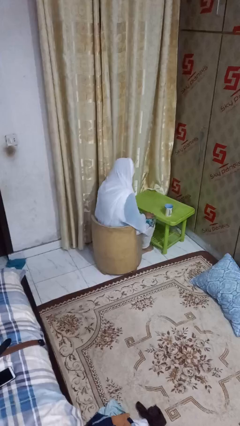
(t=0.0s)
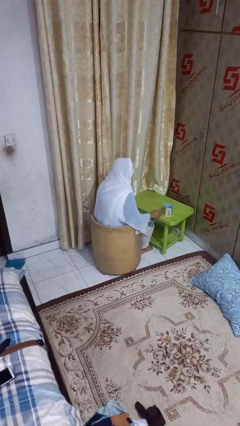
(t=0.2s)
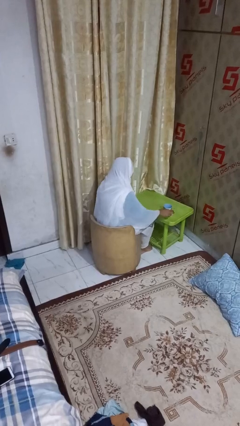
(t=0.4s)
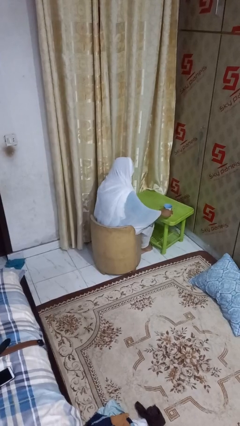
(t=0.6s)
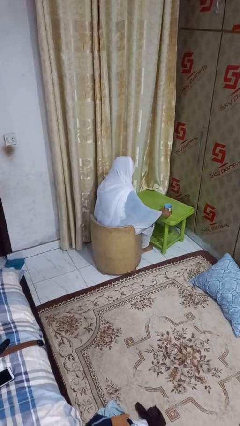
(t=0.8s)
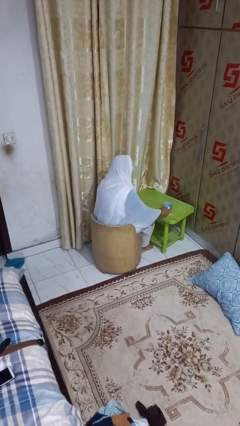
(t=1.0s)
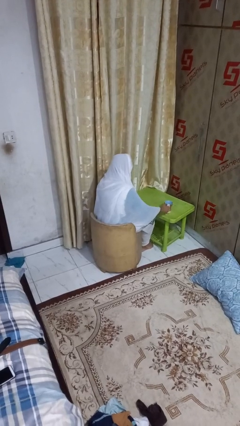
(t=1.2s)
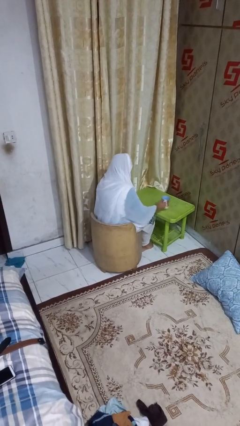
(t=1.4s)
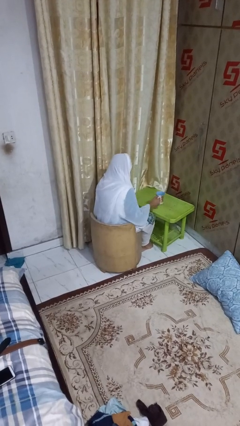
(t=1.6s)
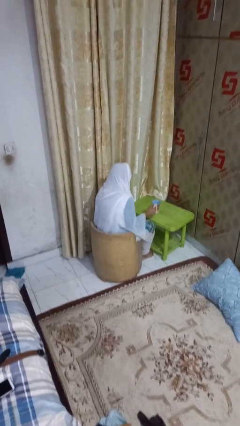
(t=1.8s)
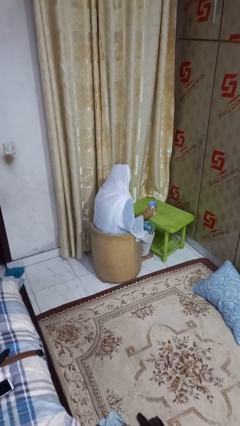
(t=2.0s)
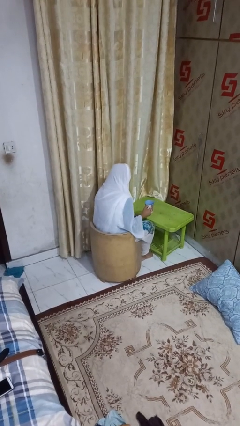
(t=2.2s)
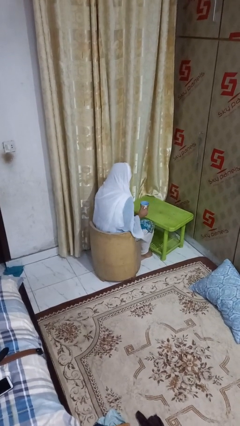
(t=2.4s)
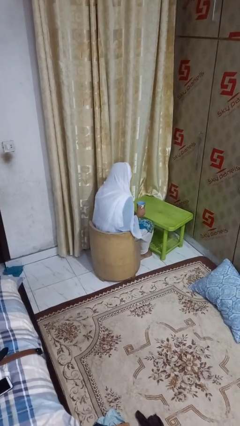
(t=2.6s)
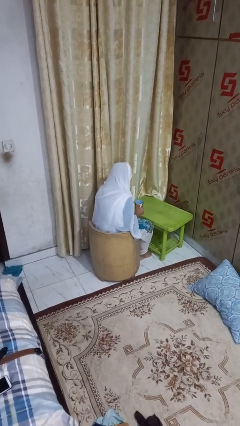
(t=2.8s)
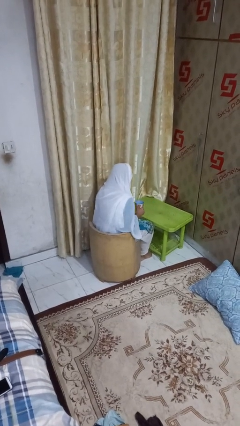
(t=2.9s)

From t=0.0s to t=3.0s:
person picks up object from table

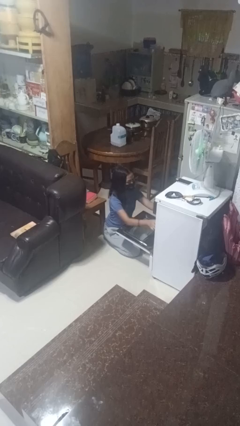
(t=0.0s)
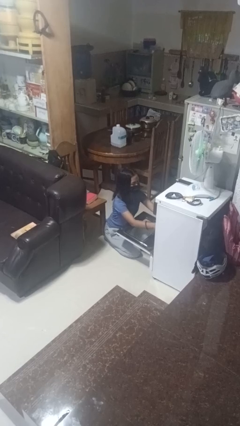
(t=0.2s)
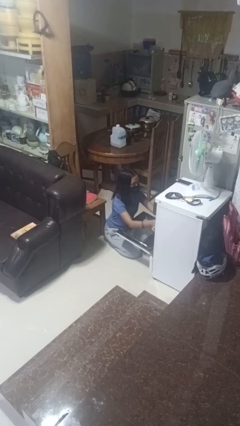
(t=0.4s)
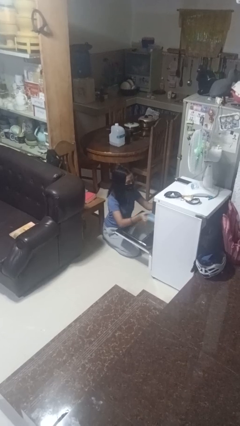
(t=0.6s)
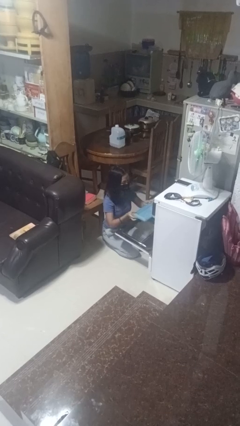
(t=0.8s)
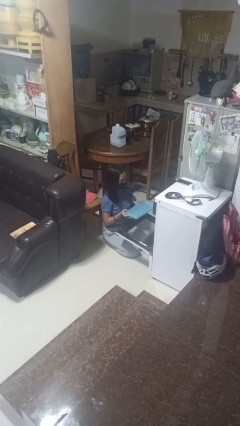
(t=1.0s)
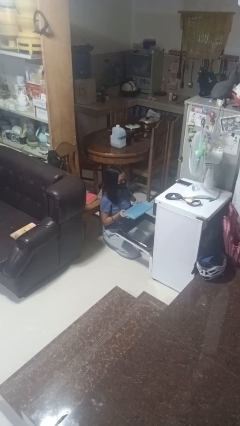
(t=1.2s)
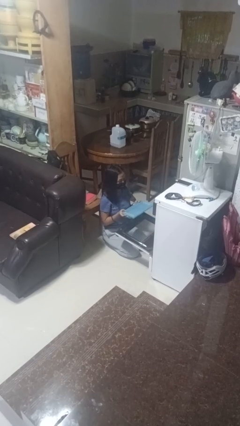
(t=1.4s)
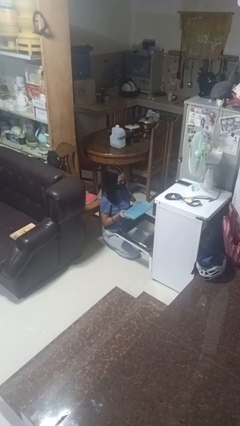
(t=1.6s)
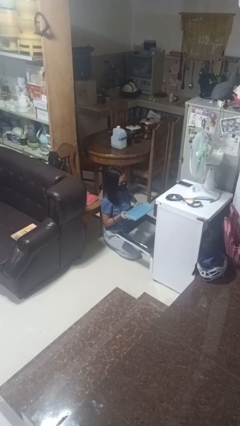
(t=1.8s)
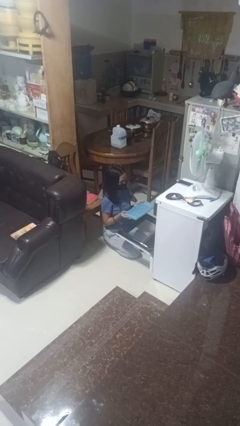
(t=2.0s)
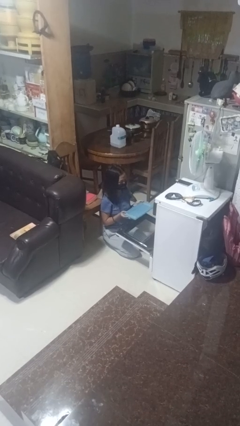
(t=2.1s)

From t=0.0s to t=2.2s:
person takes object from oven

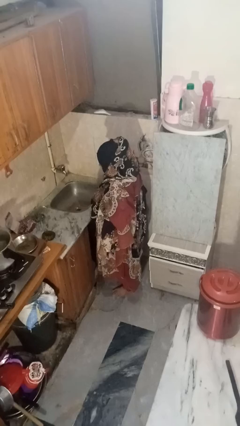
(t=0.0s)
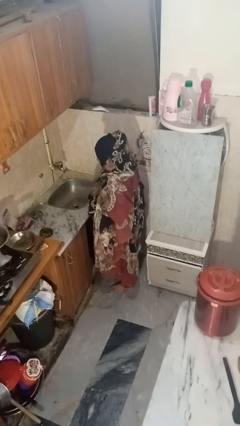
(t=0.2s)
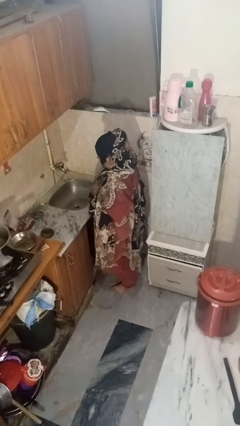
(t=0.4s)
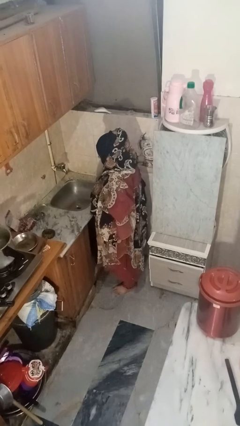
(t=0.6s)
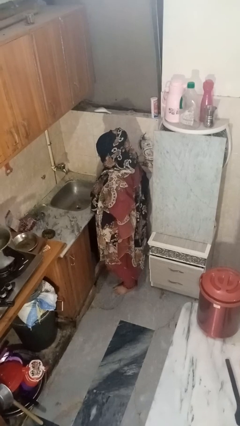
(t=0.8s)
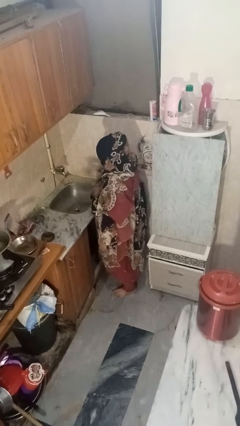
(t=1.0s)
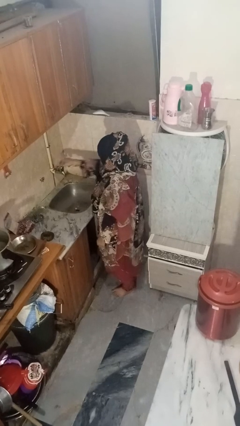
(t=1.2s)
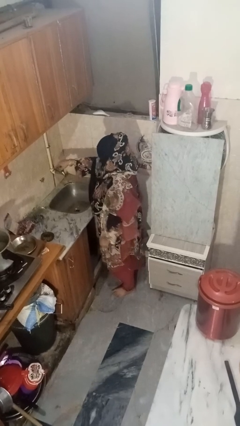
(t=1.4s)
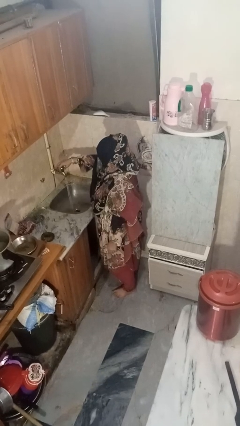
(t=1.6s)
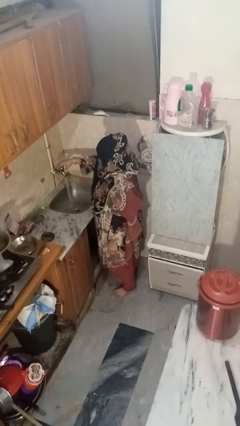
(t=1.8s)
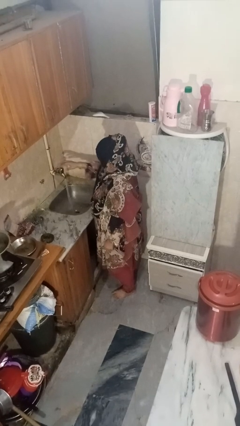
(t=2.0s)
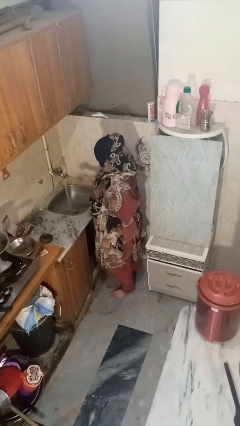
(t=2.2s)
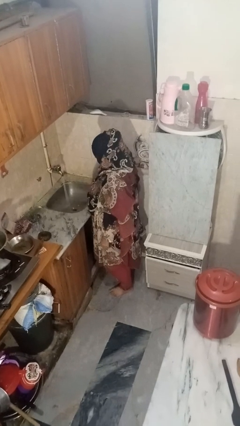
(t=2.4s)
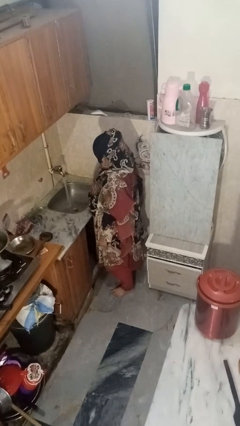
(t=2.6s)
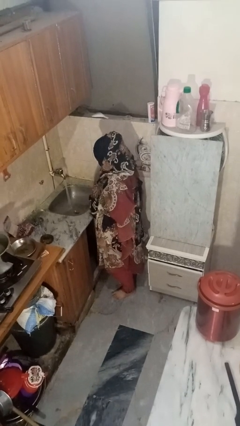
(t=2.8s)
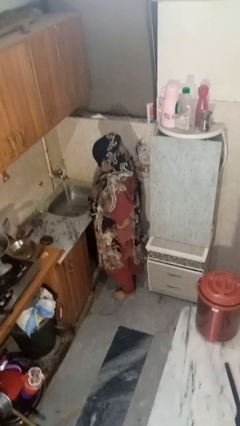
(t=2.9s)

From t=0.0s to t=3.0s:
person turns on faucet

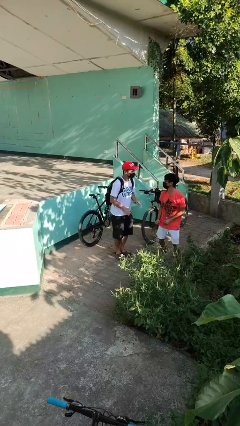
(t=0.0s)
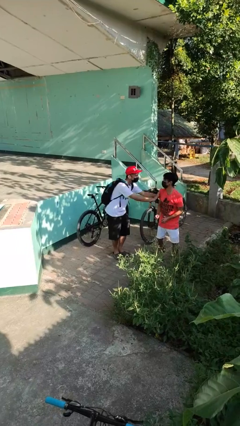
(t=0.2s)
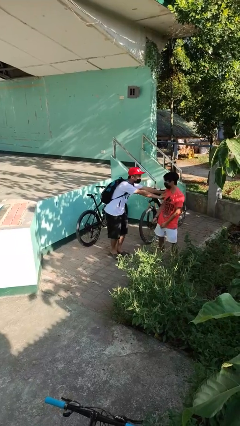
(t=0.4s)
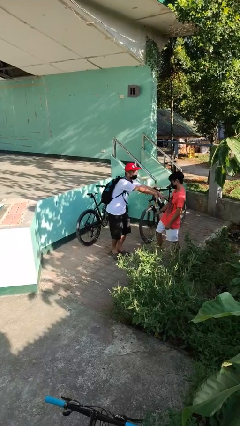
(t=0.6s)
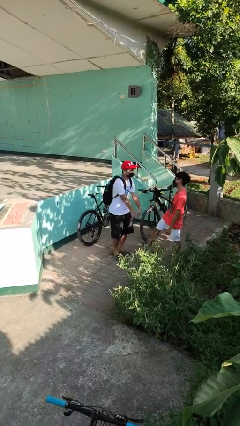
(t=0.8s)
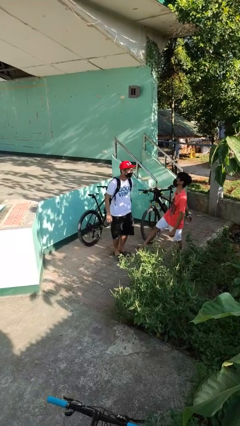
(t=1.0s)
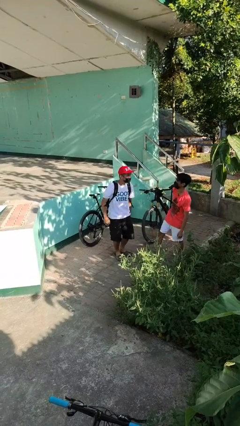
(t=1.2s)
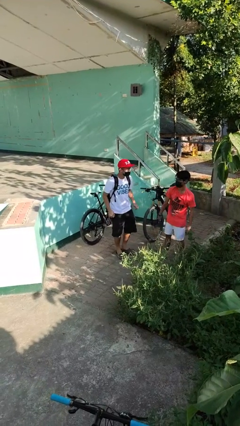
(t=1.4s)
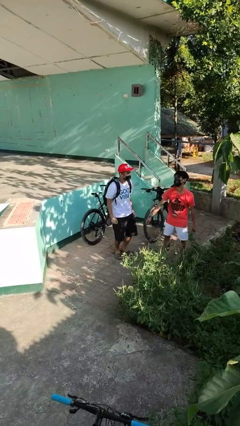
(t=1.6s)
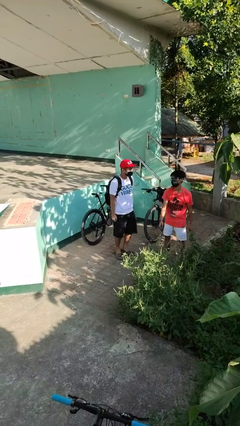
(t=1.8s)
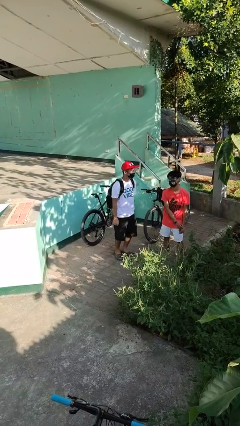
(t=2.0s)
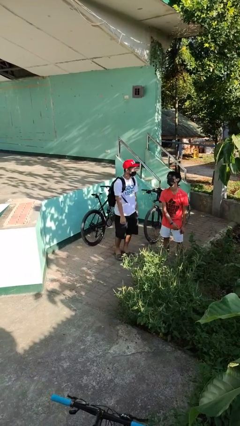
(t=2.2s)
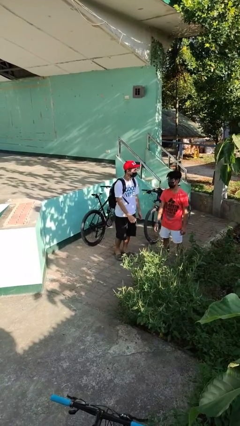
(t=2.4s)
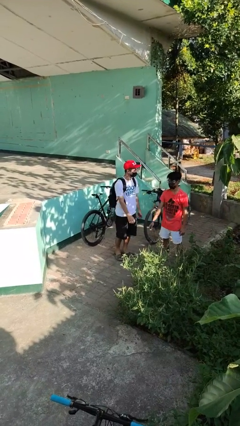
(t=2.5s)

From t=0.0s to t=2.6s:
person shoves person

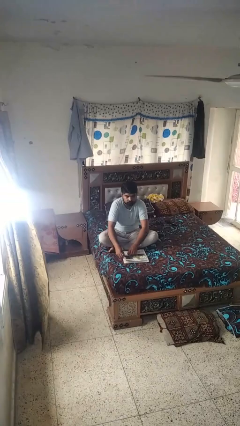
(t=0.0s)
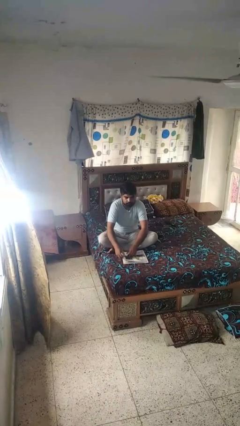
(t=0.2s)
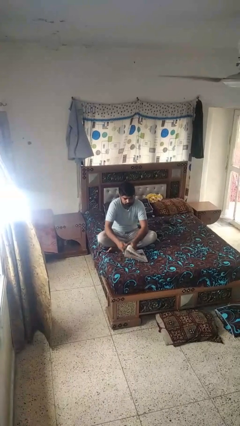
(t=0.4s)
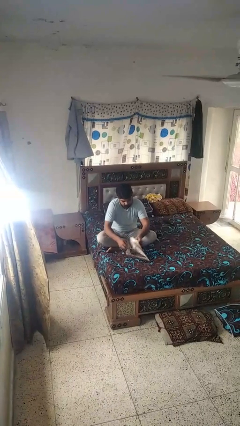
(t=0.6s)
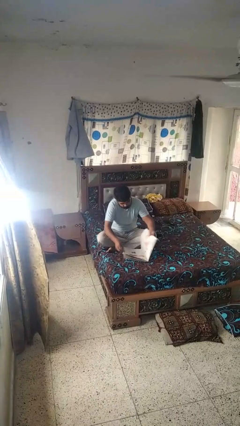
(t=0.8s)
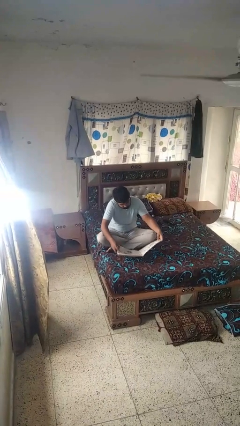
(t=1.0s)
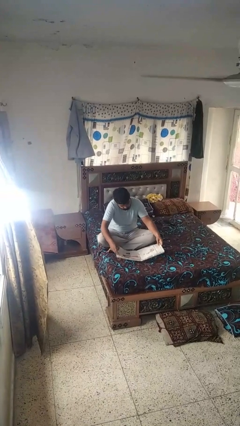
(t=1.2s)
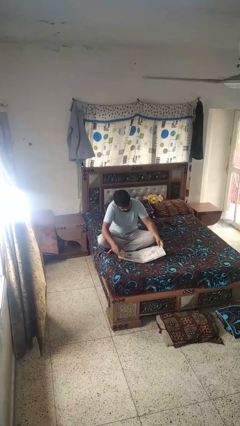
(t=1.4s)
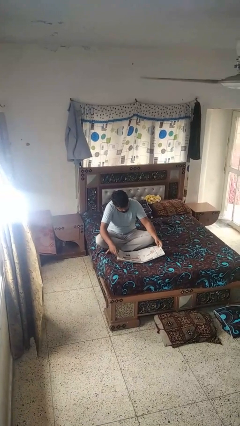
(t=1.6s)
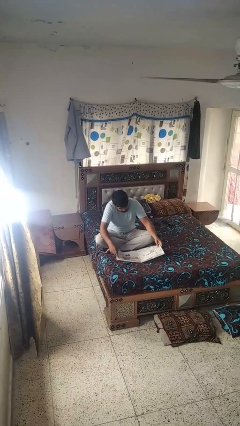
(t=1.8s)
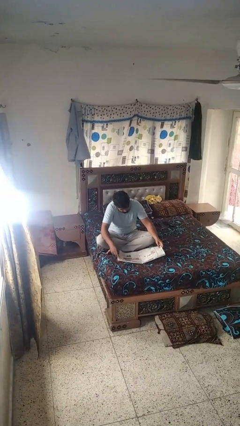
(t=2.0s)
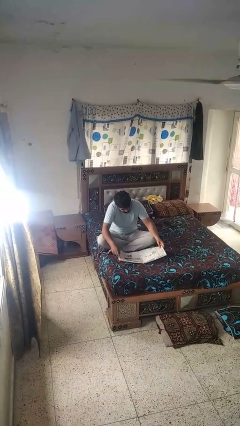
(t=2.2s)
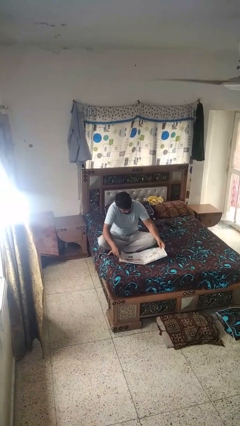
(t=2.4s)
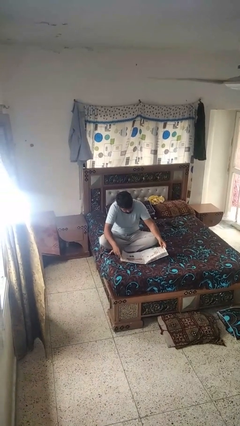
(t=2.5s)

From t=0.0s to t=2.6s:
person reads magazine

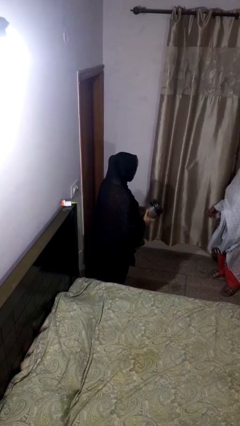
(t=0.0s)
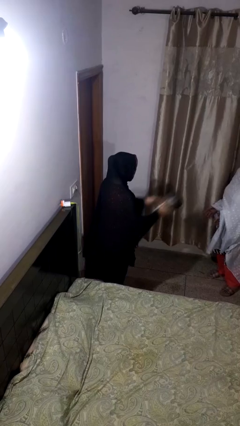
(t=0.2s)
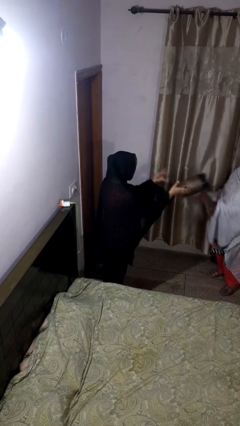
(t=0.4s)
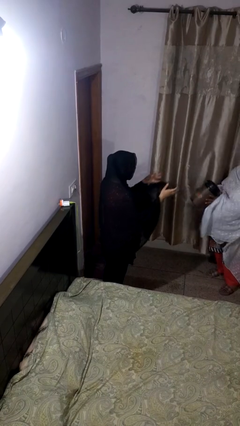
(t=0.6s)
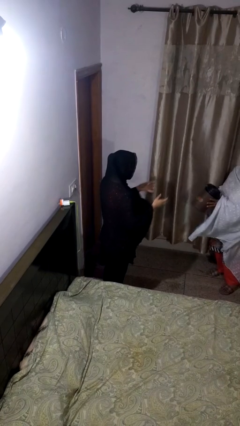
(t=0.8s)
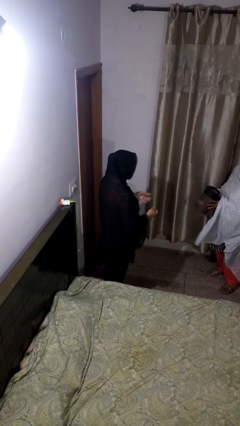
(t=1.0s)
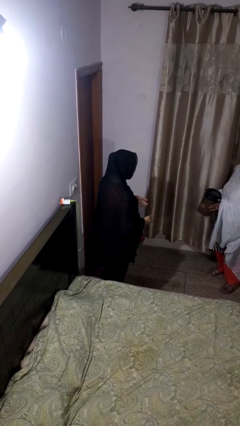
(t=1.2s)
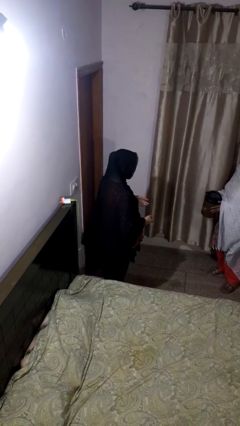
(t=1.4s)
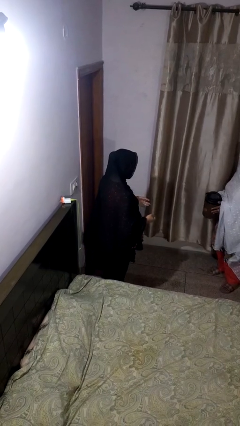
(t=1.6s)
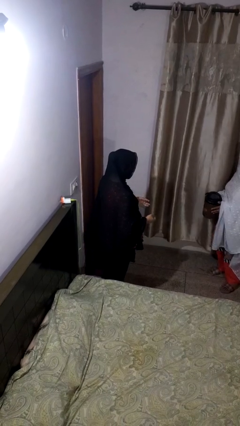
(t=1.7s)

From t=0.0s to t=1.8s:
person throws object to person

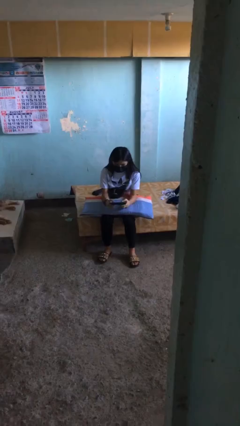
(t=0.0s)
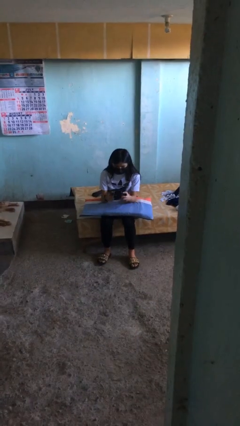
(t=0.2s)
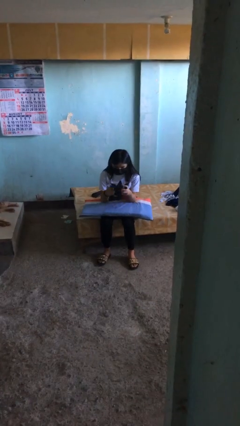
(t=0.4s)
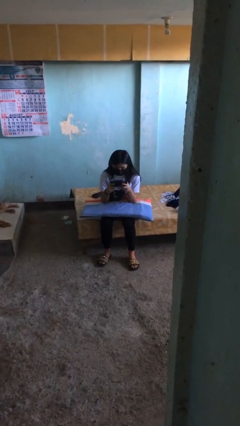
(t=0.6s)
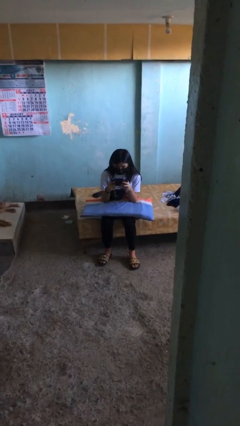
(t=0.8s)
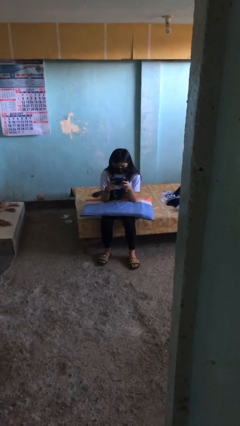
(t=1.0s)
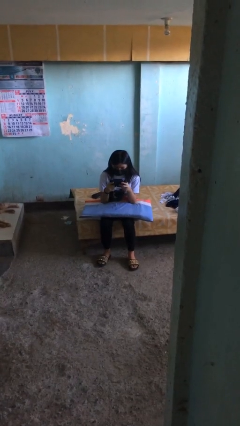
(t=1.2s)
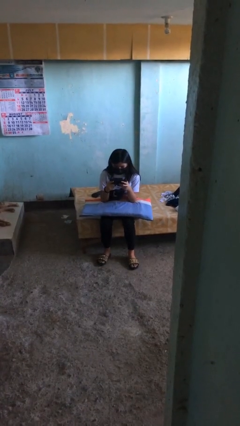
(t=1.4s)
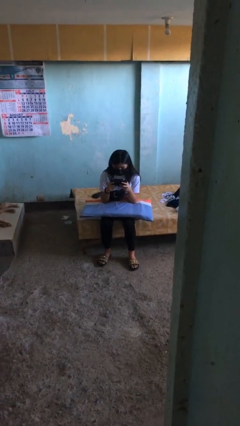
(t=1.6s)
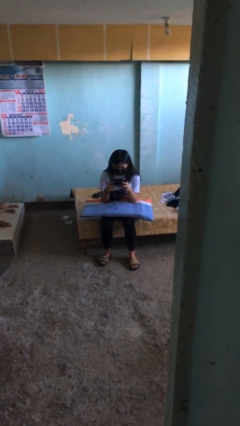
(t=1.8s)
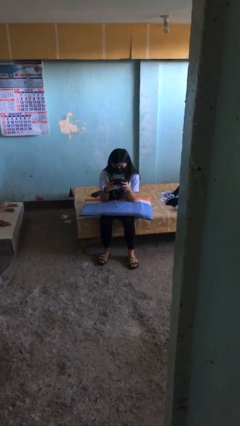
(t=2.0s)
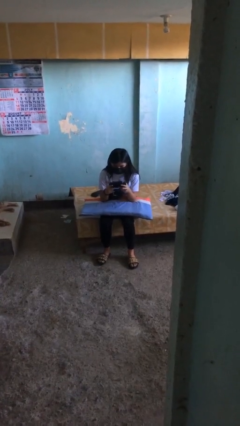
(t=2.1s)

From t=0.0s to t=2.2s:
person interacts with handheld game
